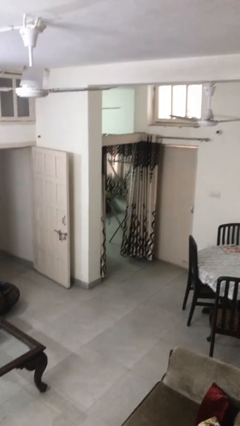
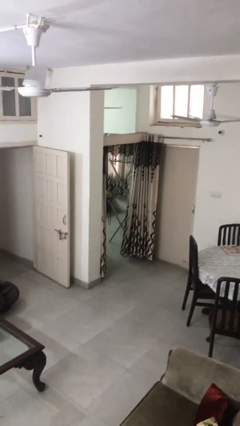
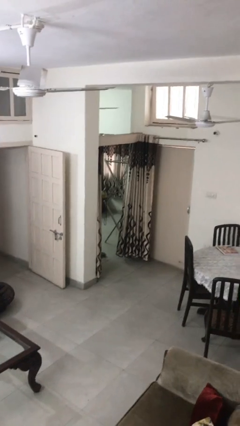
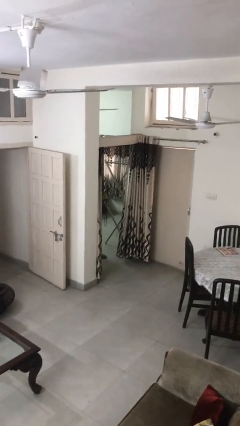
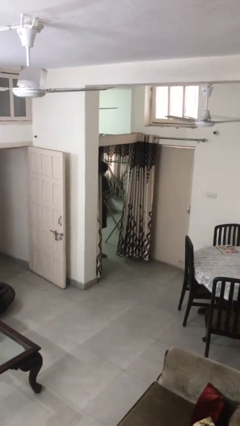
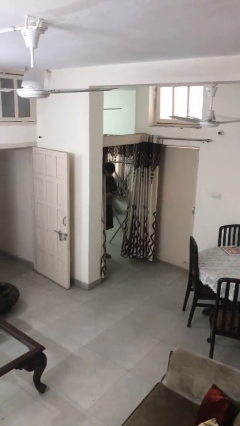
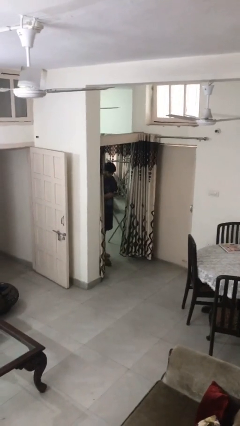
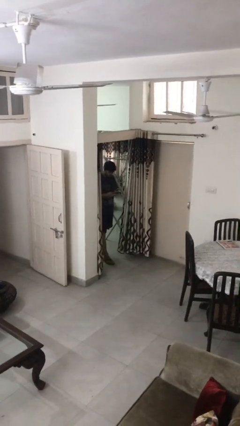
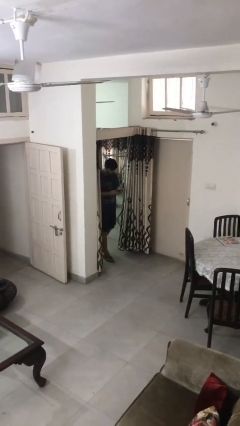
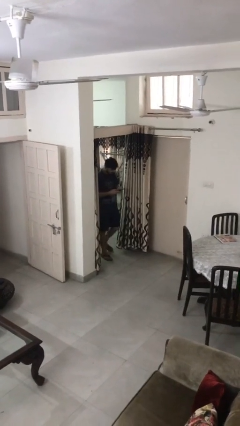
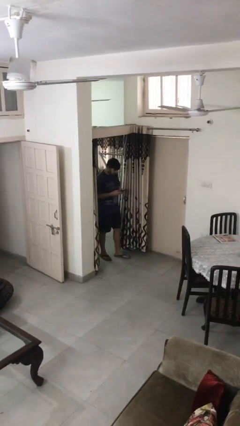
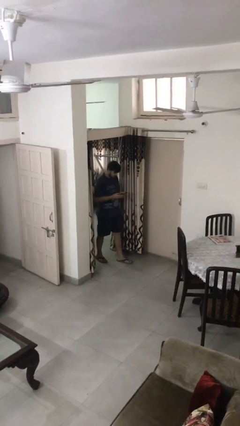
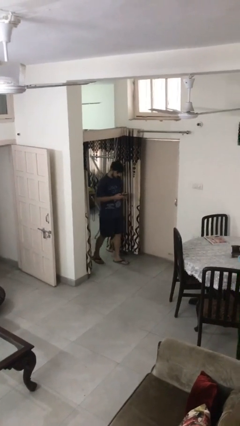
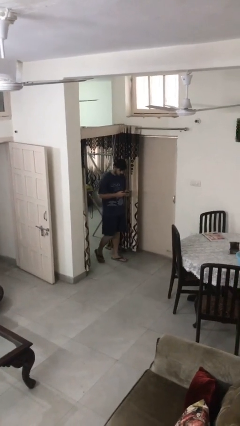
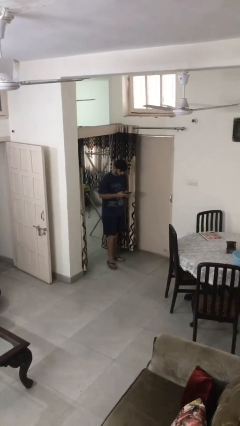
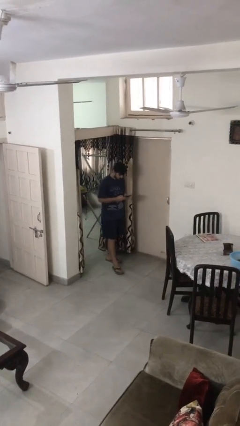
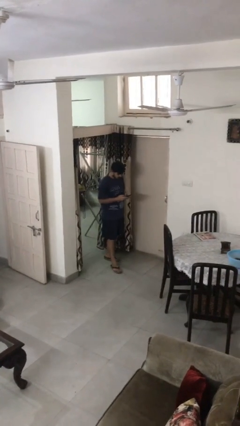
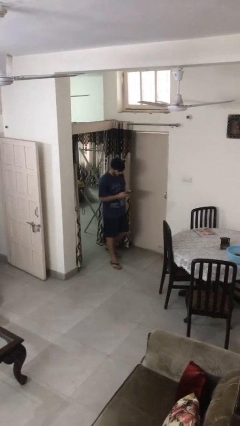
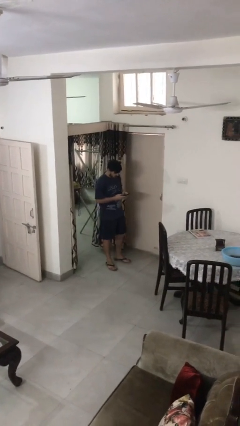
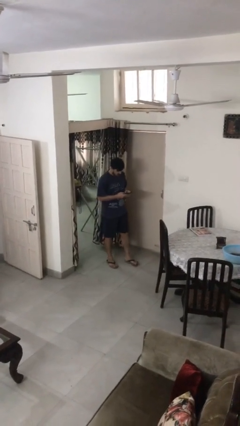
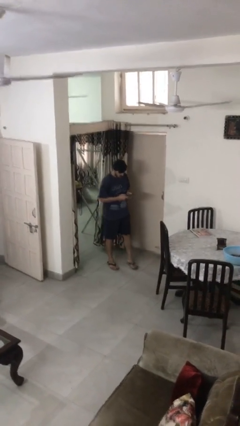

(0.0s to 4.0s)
person enters scene through structure

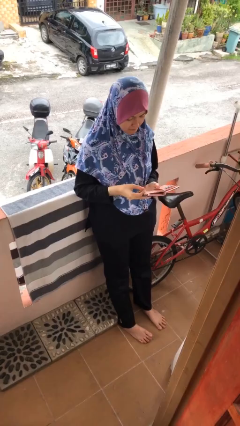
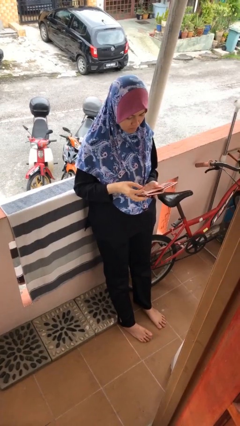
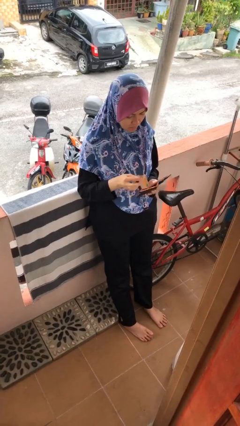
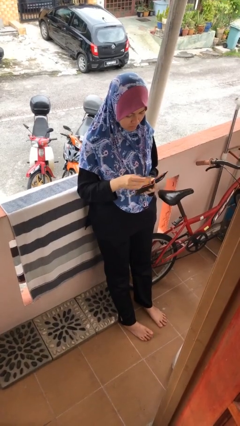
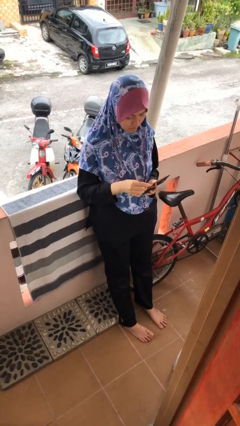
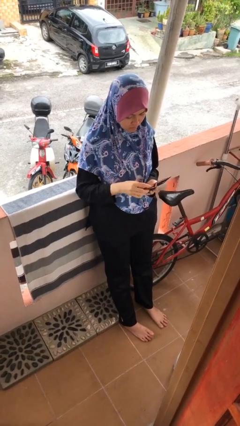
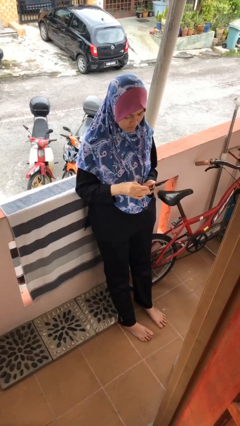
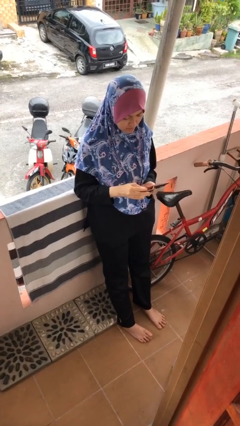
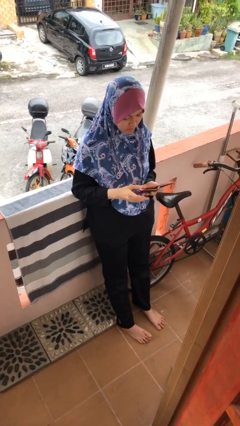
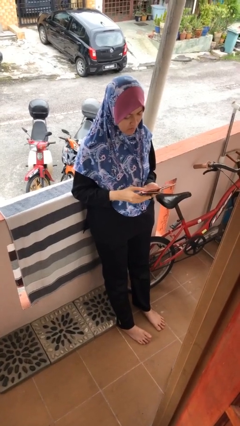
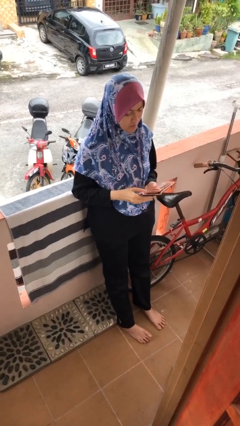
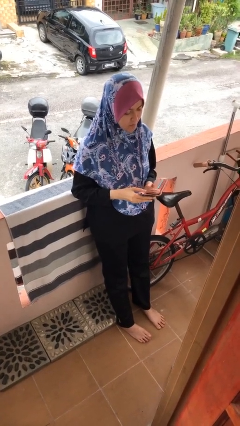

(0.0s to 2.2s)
person puts object into purse

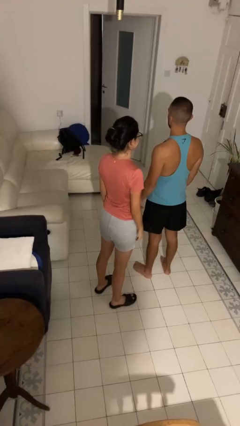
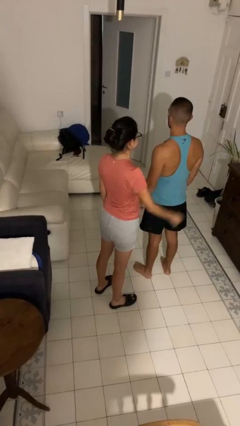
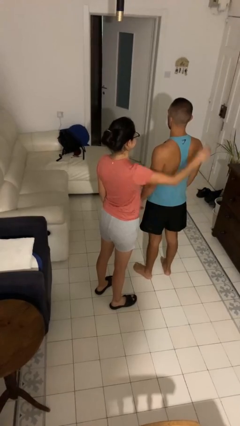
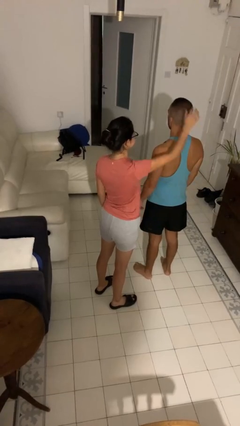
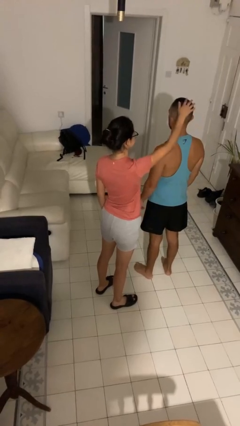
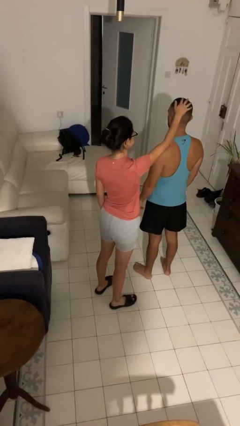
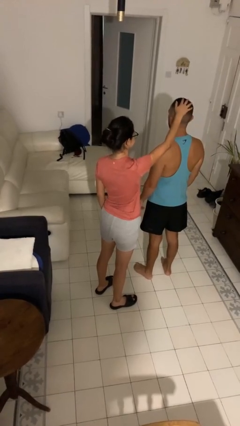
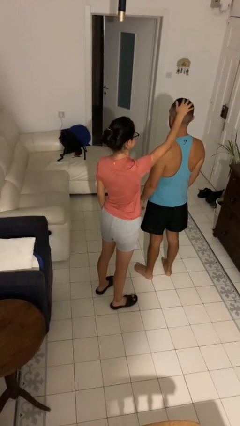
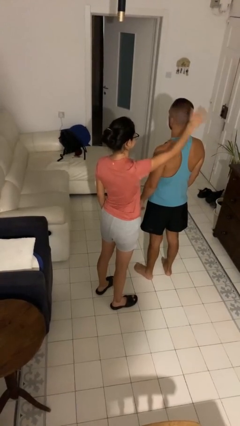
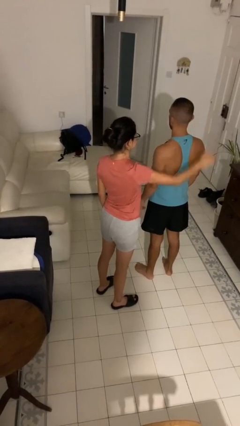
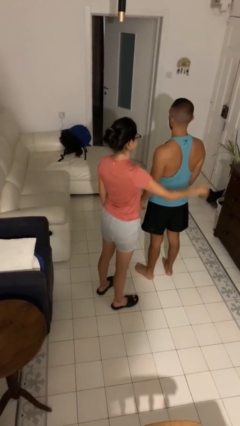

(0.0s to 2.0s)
person grabs person by hair

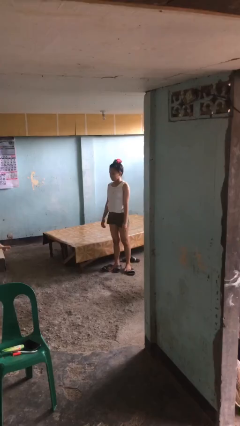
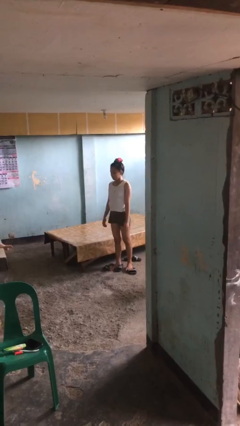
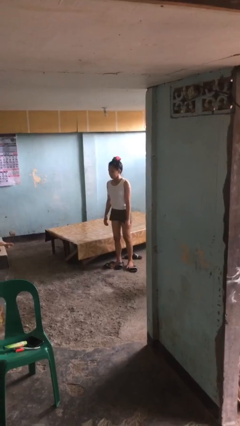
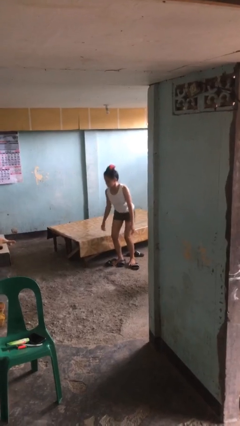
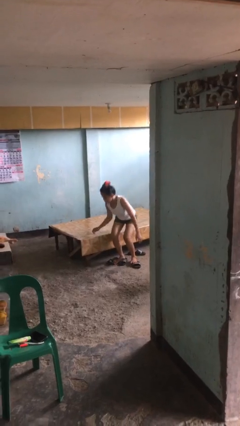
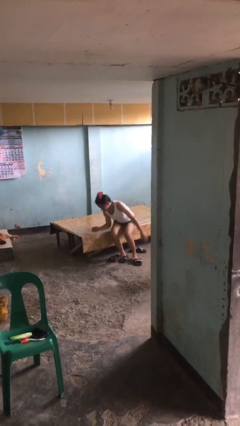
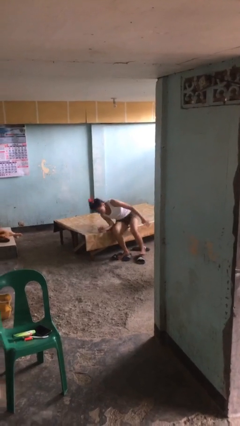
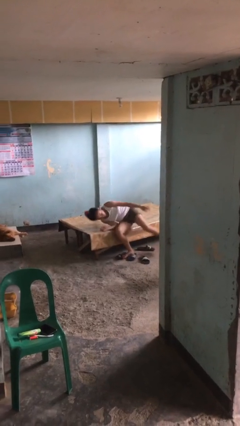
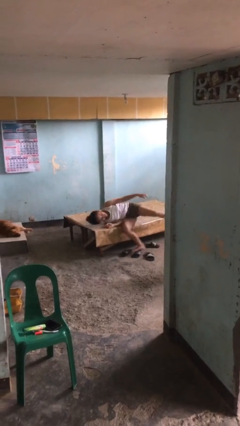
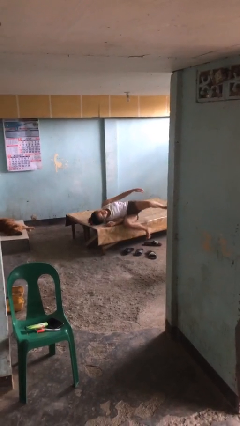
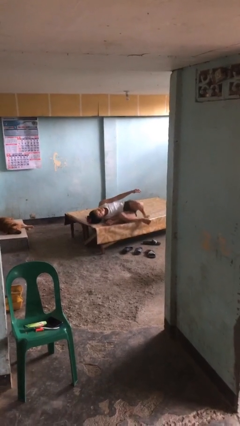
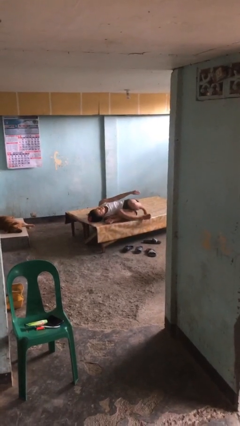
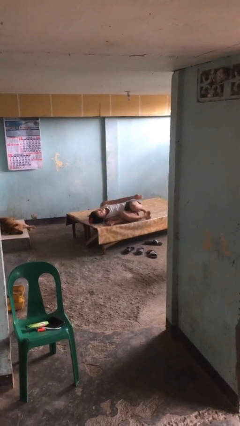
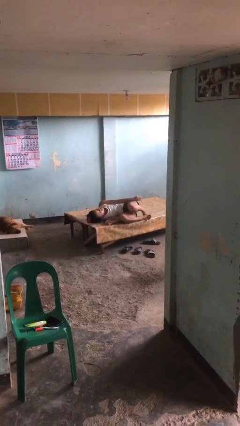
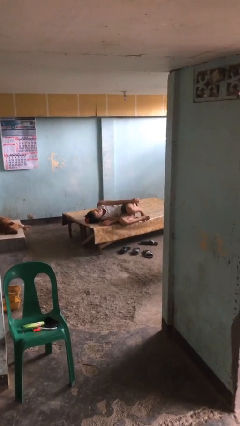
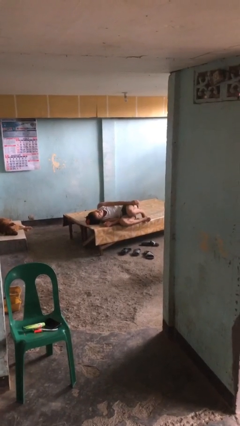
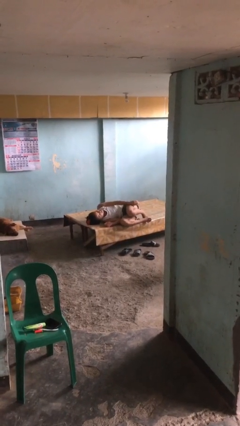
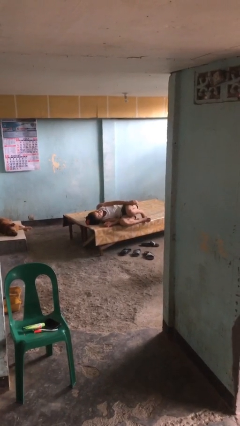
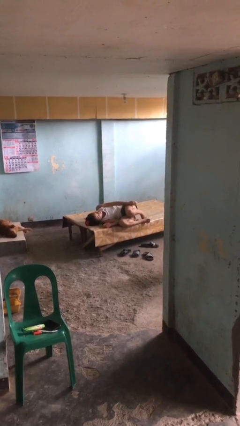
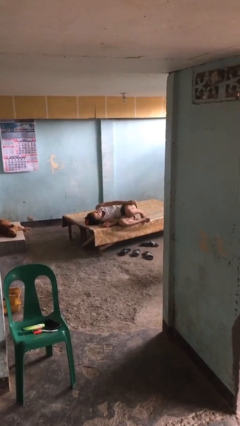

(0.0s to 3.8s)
person lies down on bed

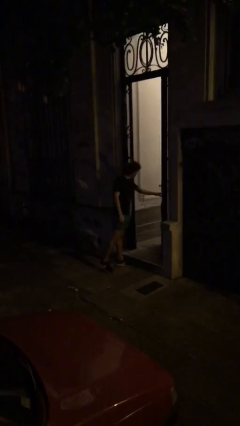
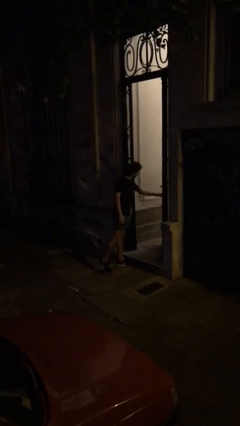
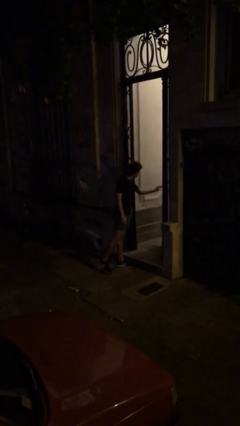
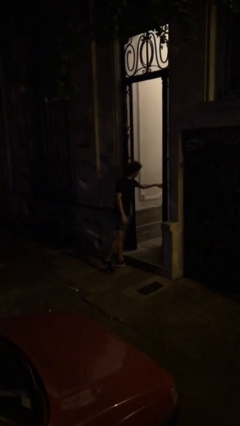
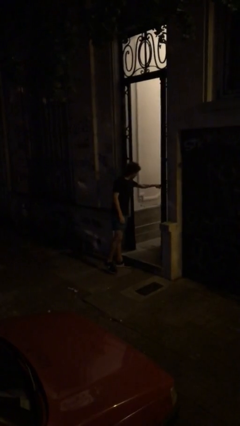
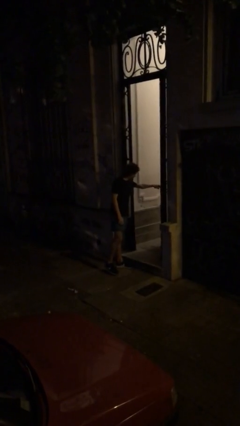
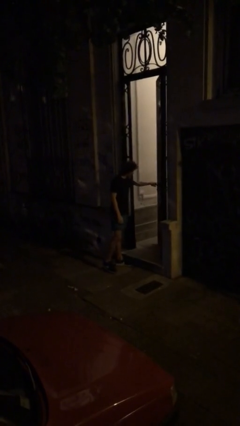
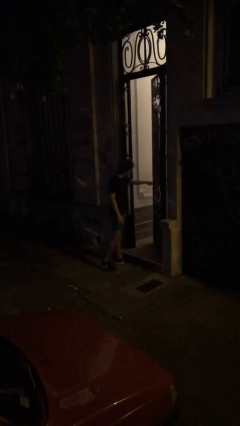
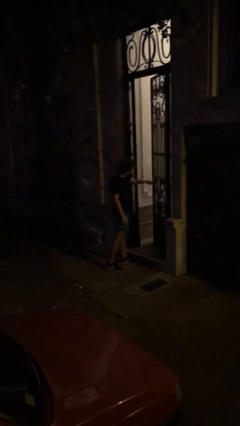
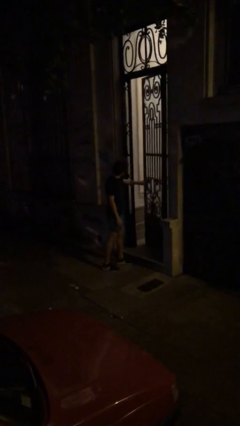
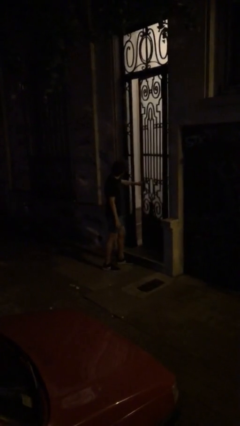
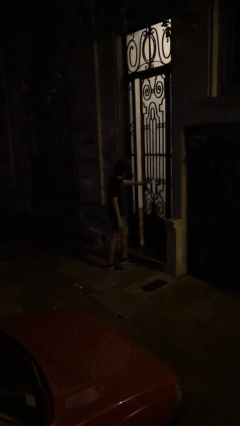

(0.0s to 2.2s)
person closes facility door

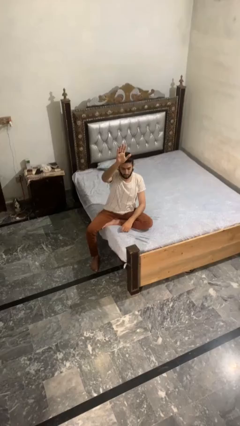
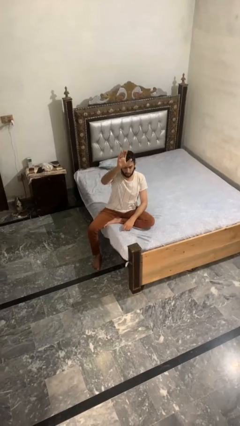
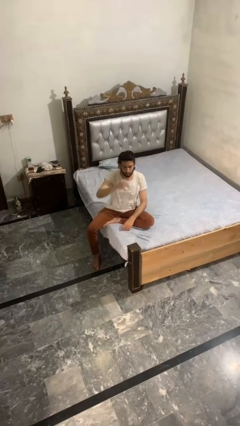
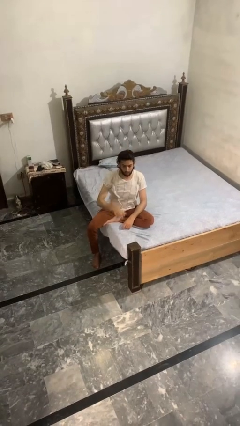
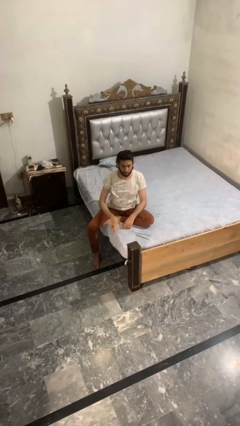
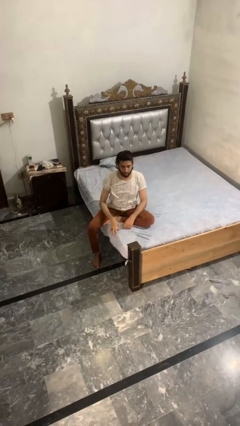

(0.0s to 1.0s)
person gestures lower hand

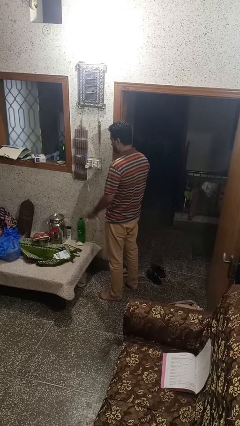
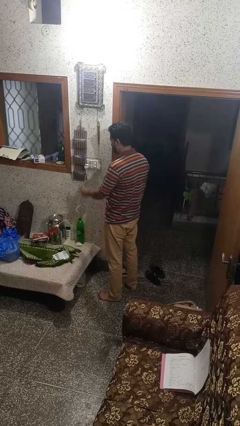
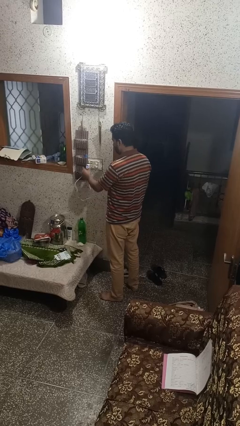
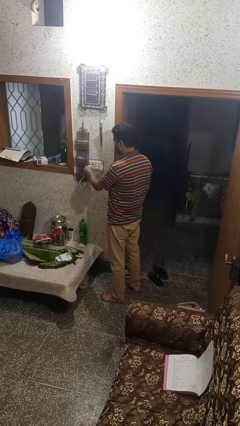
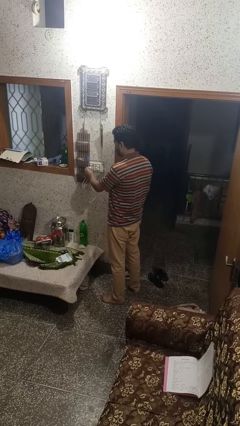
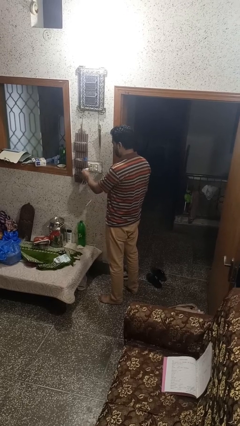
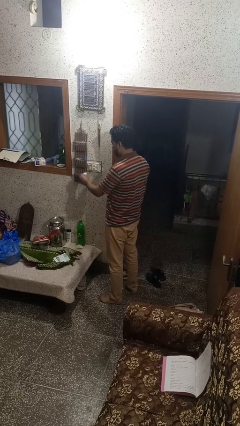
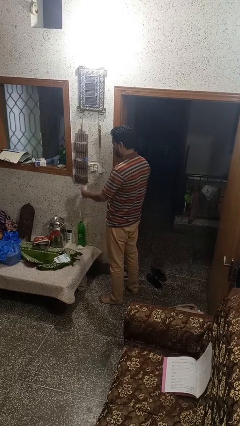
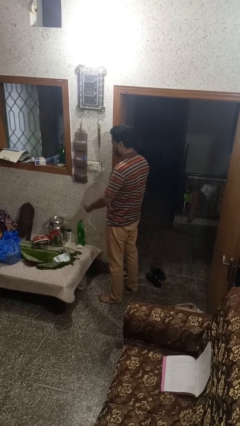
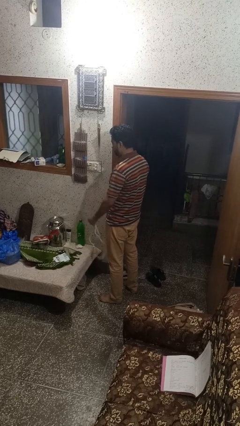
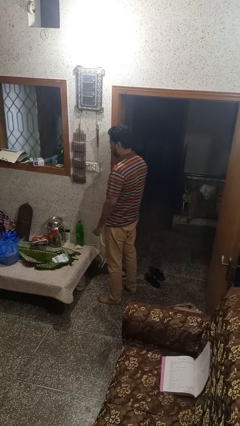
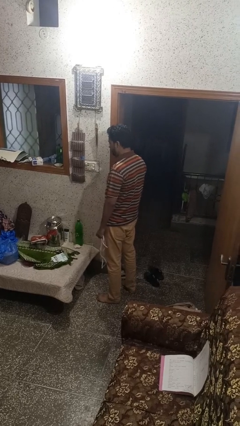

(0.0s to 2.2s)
person unplugs from electrical socket
